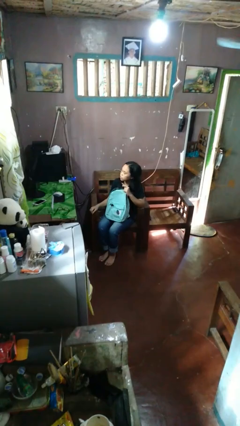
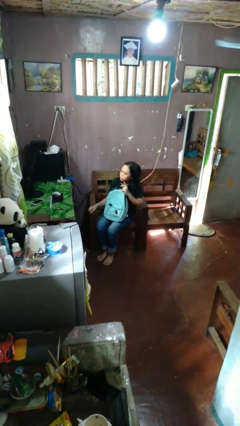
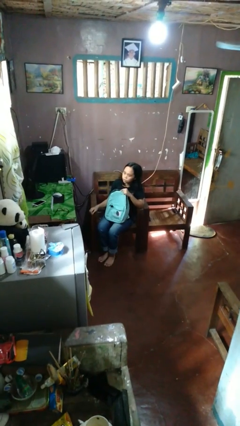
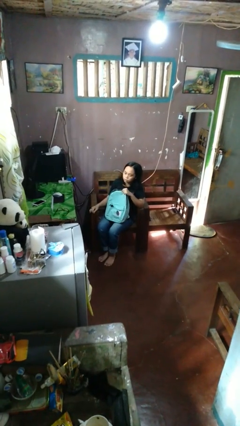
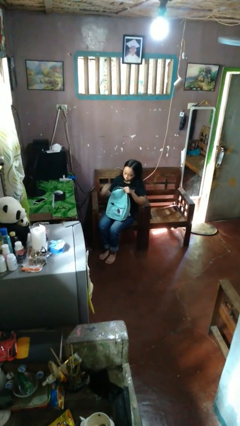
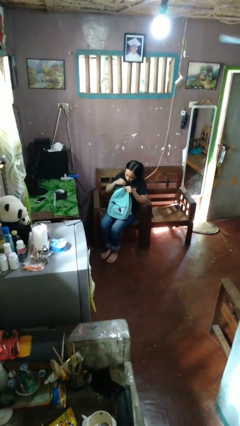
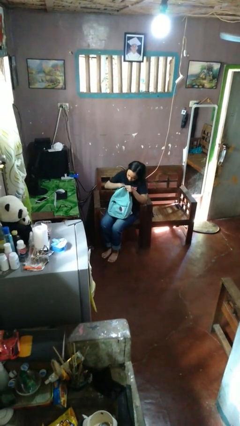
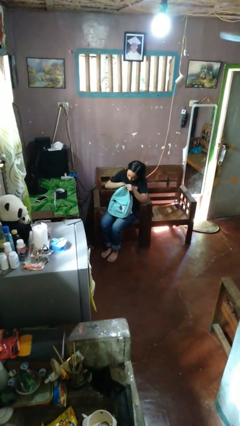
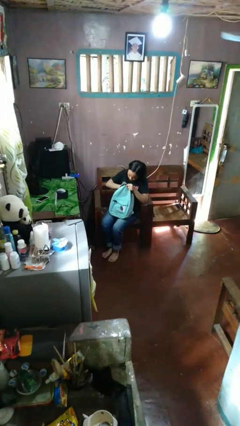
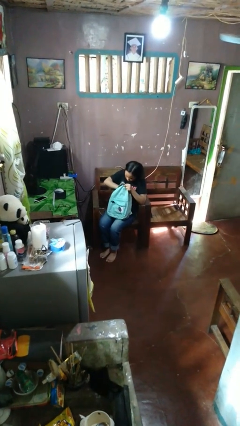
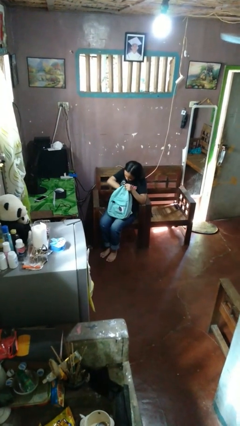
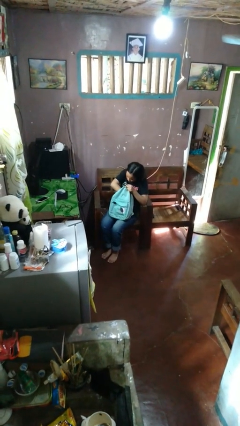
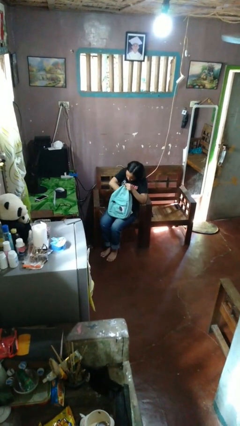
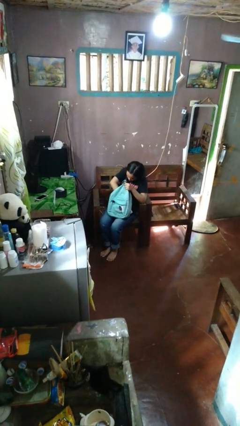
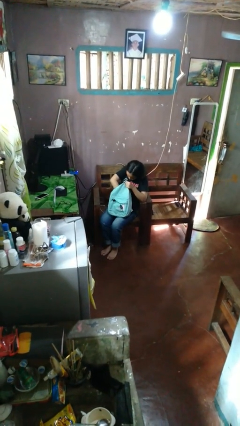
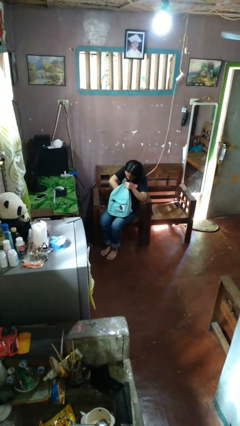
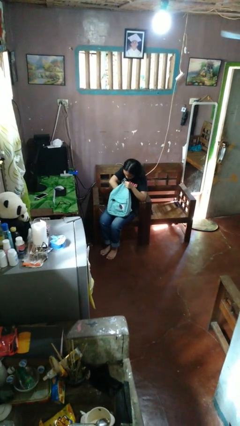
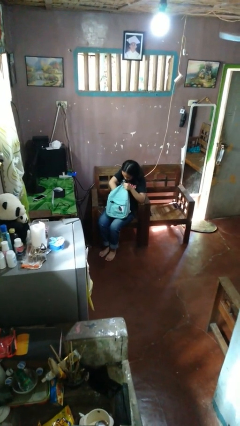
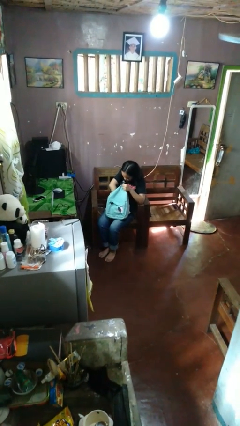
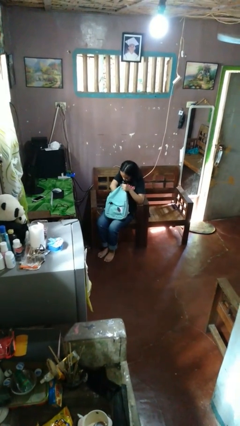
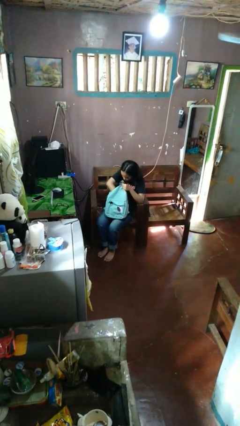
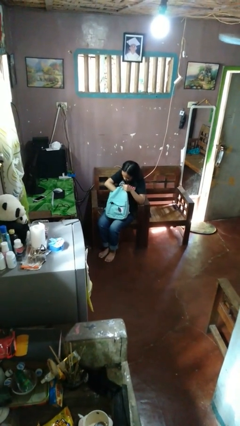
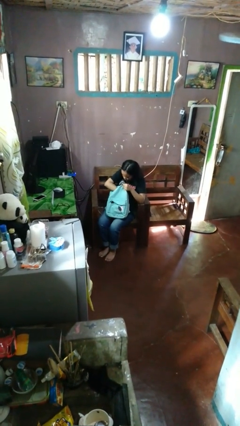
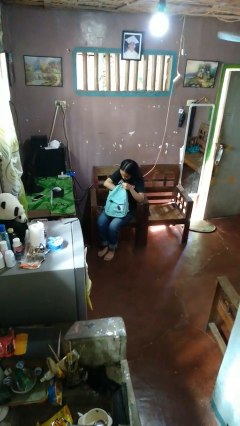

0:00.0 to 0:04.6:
person searches in backpack

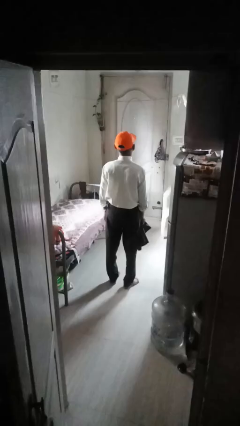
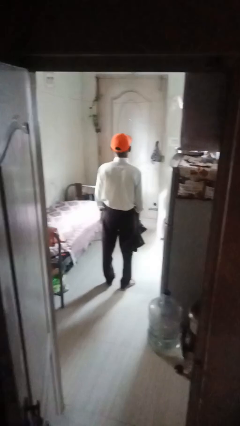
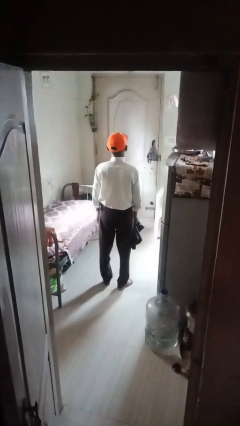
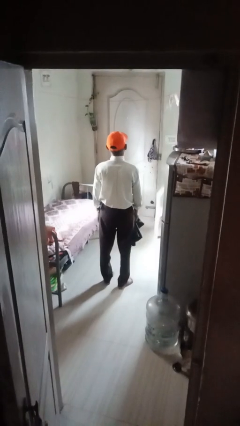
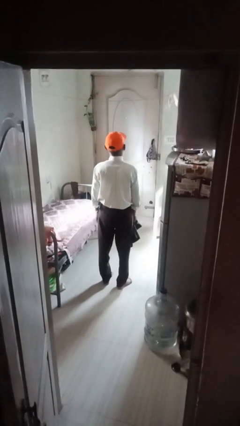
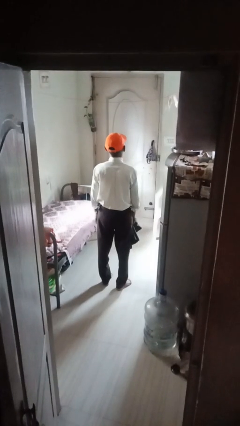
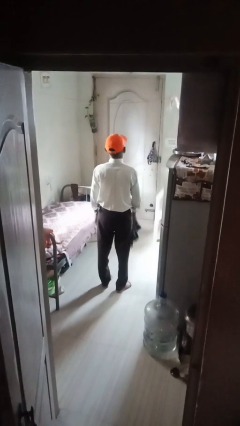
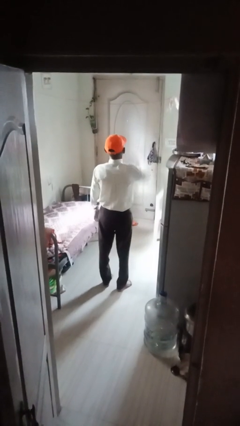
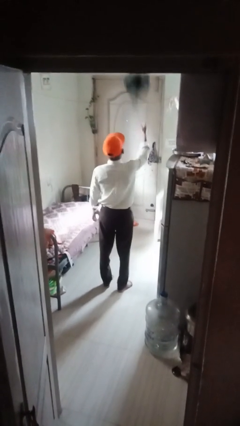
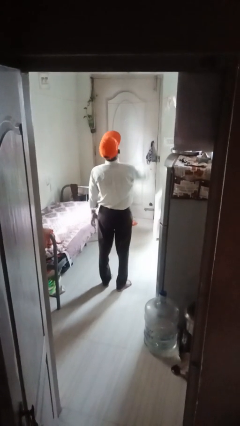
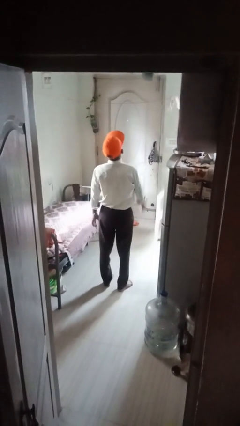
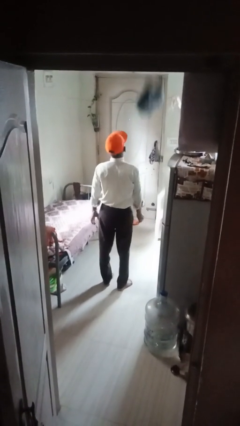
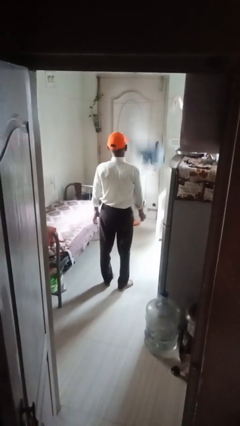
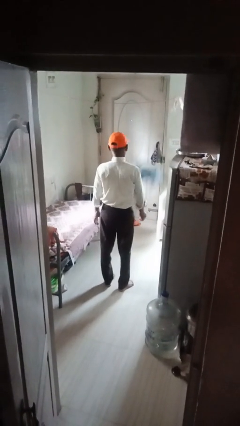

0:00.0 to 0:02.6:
person throws object into air

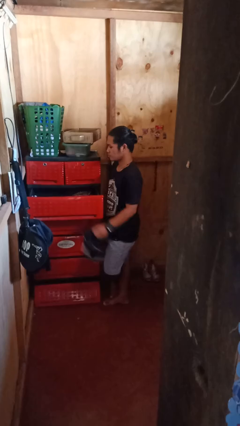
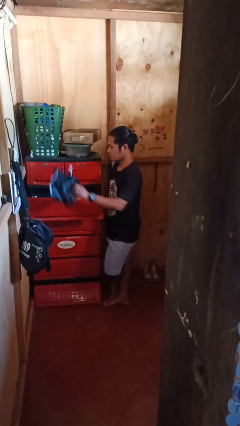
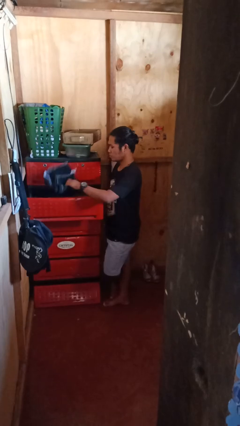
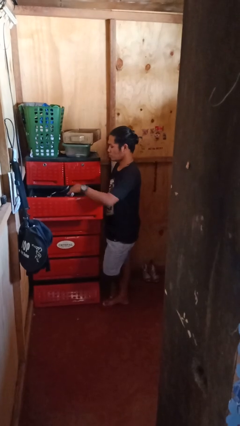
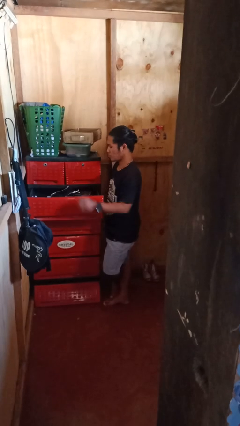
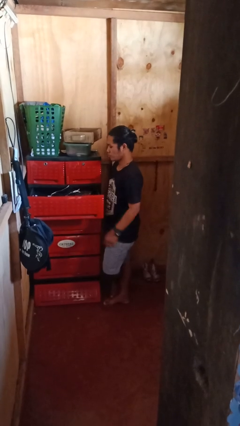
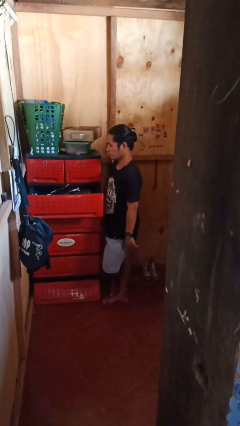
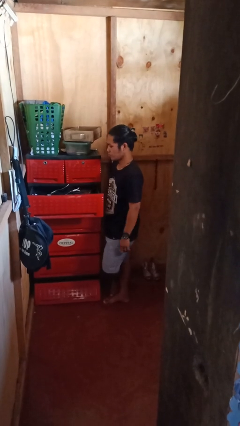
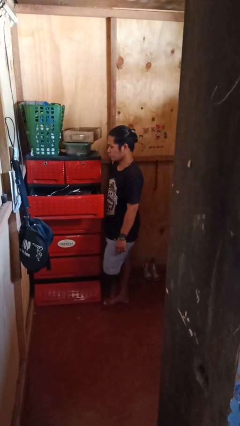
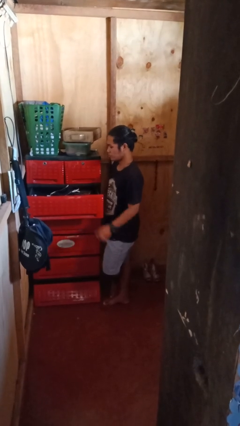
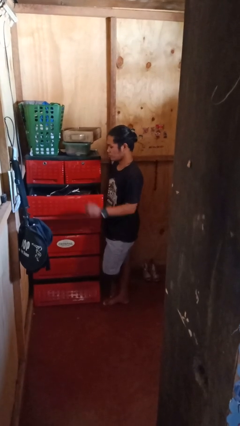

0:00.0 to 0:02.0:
person puts clothes into dresser

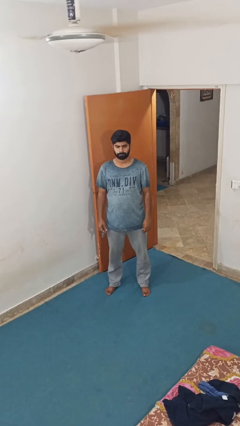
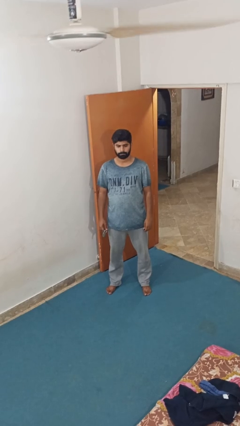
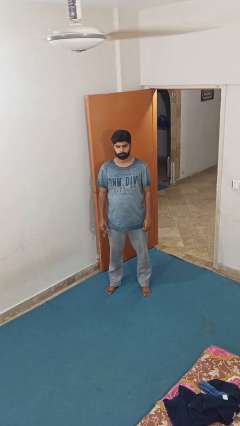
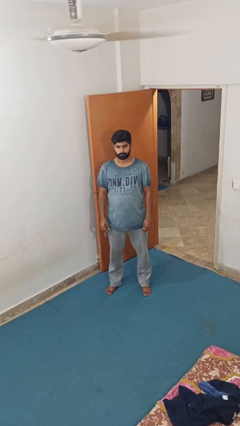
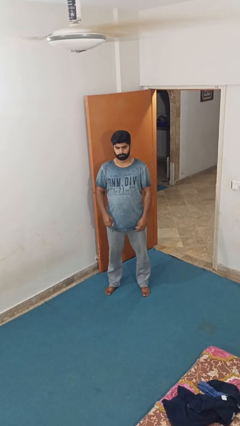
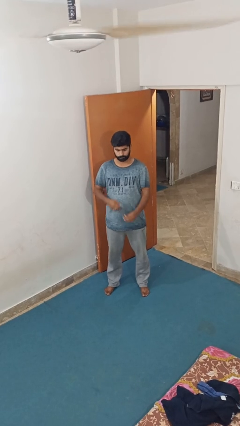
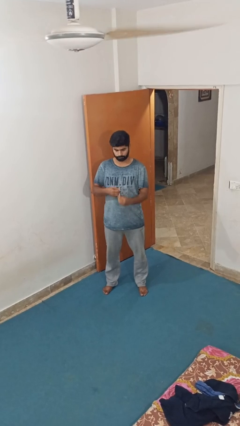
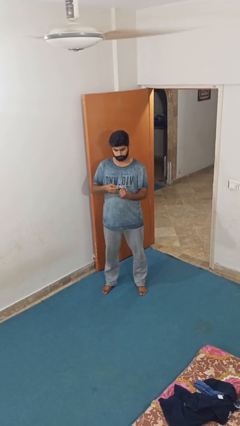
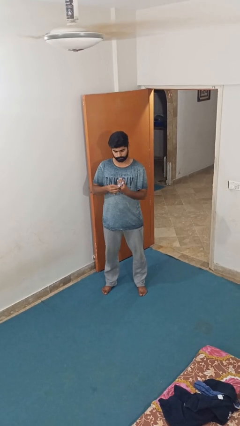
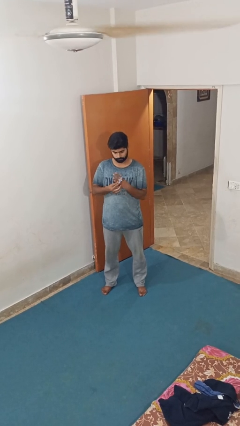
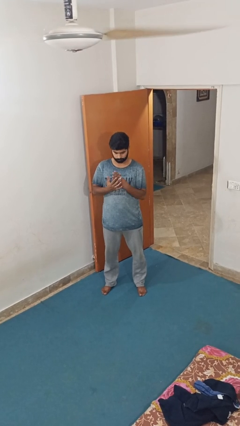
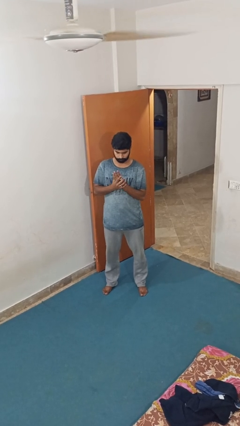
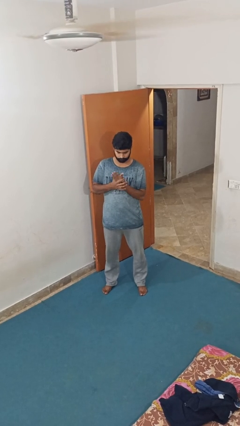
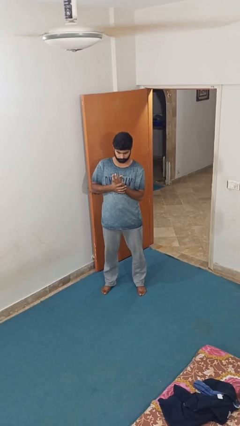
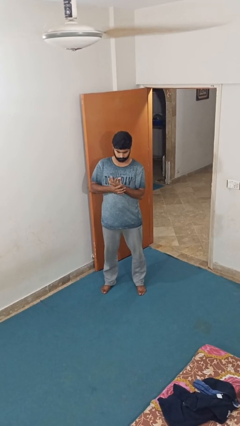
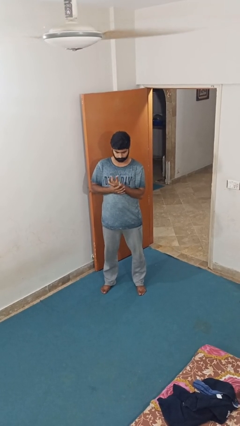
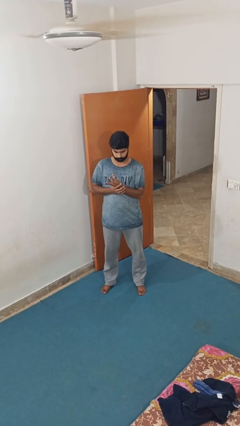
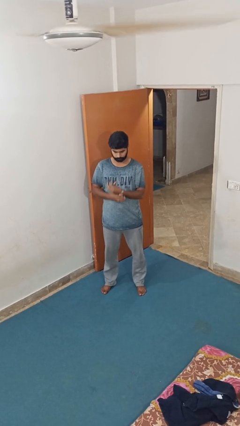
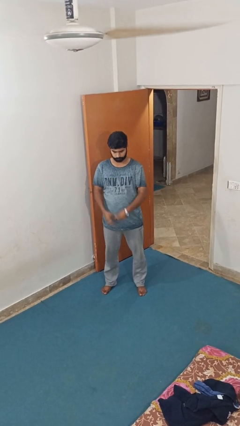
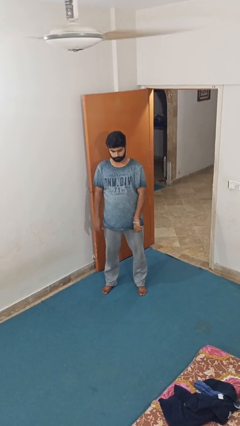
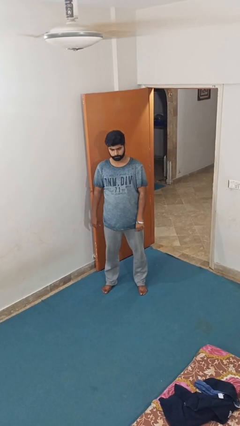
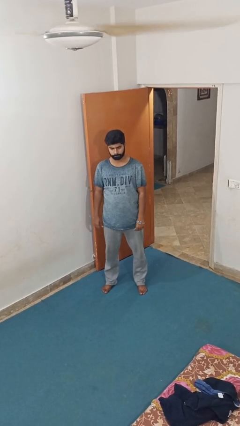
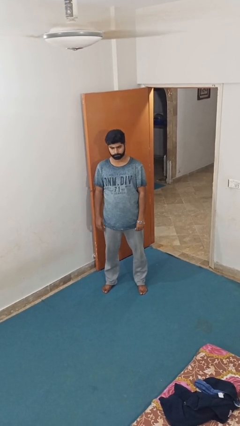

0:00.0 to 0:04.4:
person puts on wristwatch

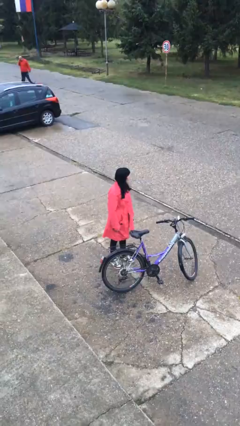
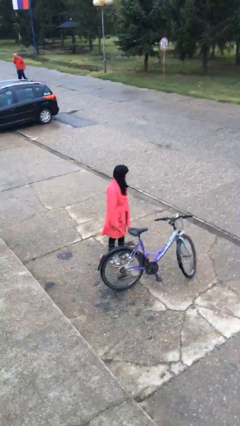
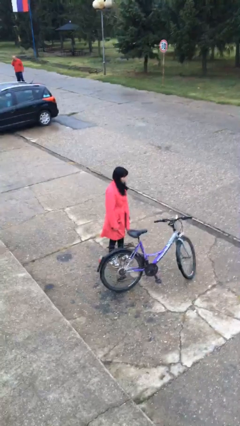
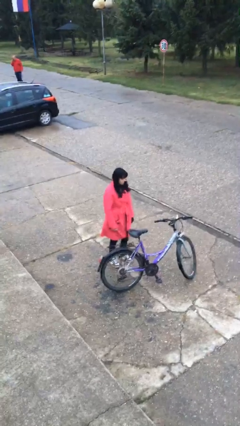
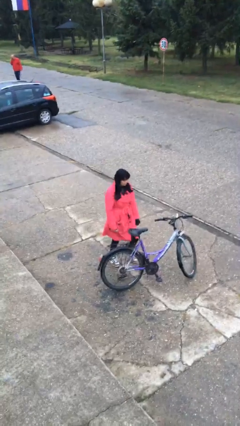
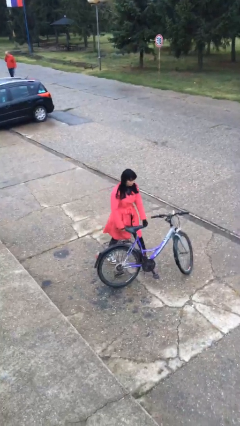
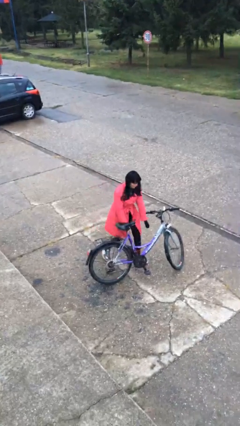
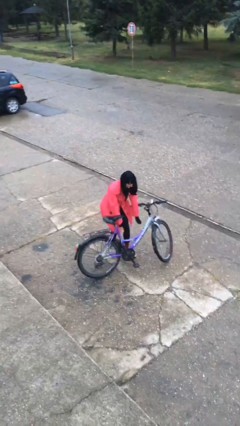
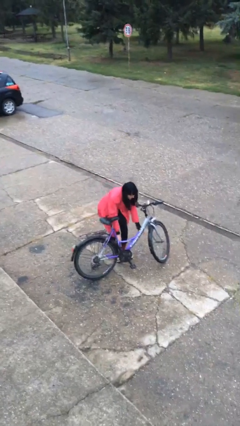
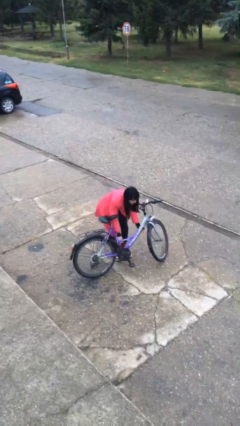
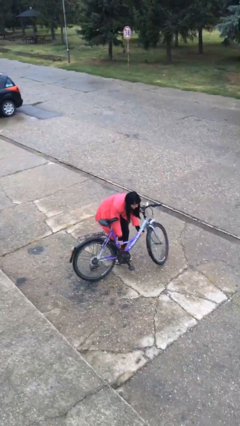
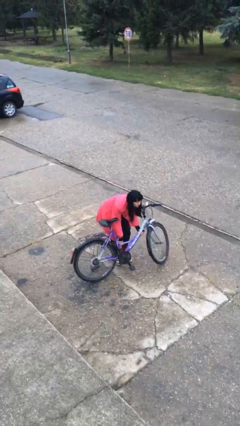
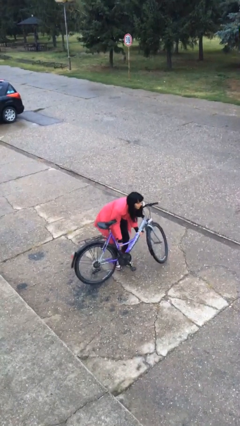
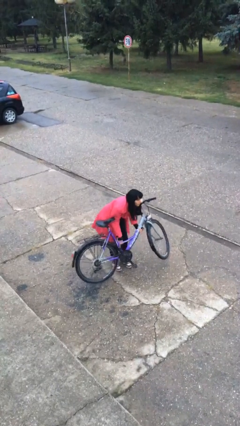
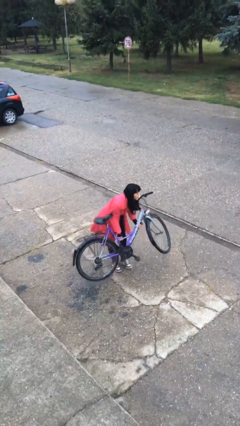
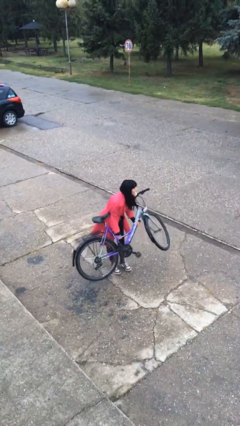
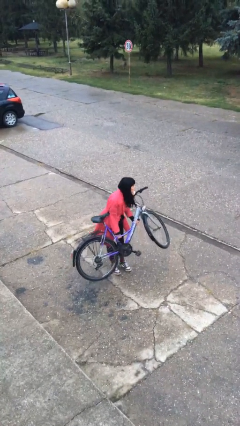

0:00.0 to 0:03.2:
person picks up object from floor

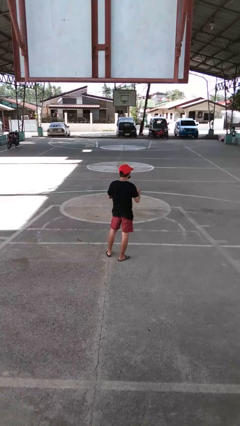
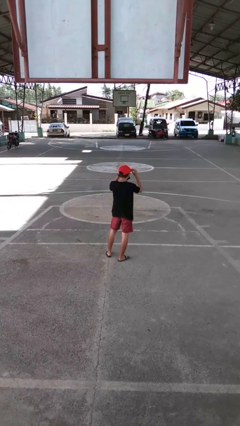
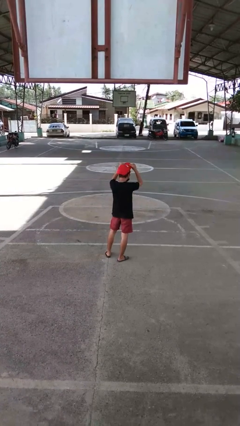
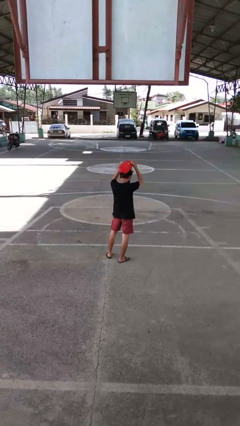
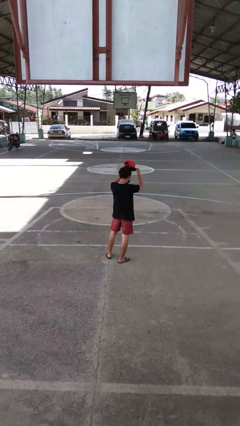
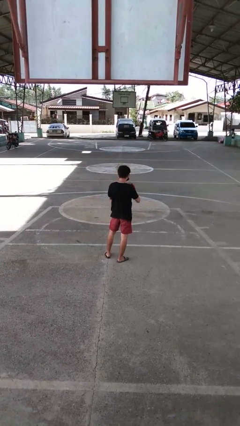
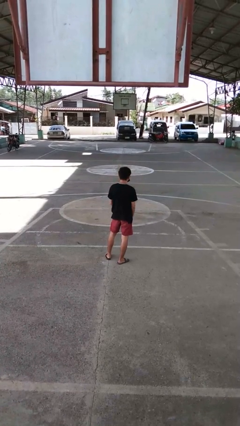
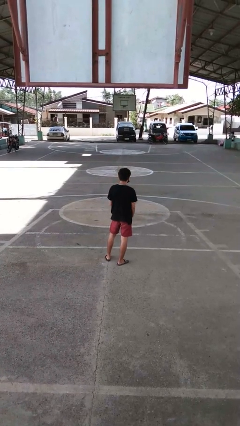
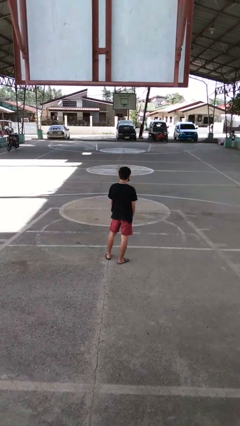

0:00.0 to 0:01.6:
person takes off hat
